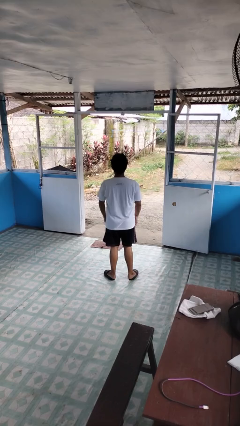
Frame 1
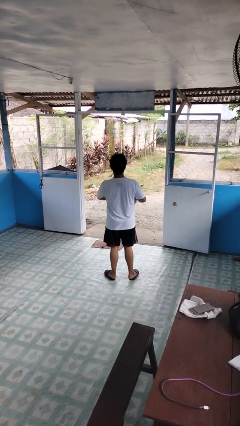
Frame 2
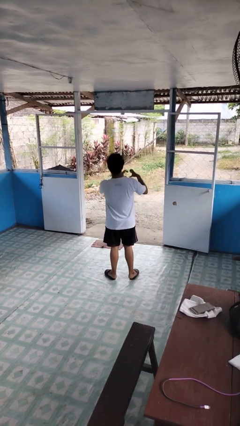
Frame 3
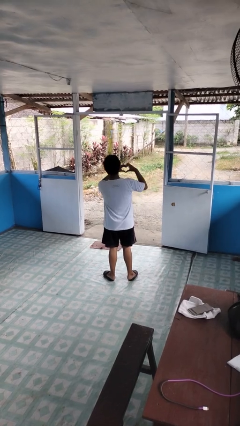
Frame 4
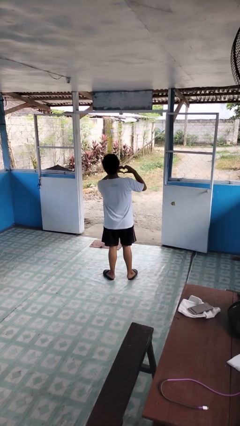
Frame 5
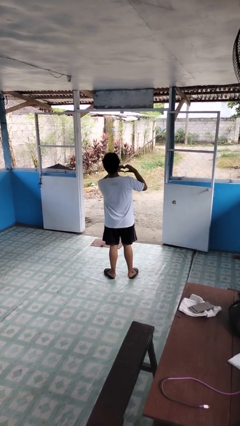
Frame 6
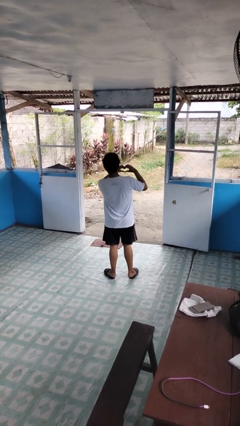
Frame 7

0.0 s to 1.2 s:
person gestures heart

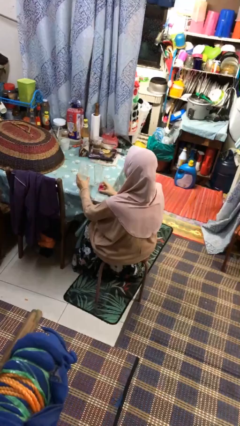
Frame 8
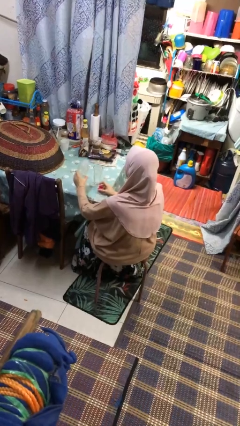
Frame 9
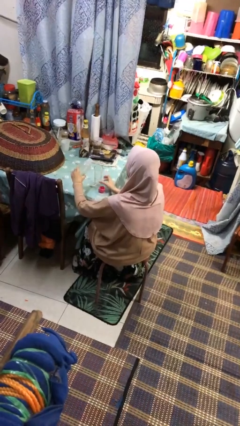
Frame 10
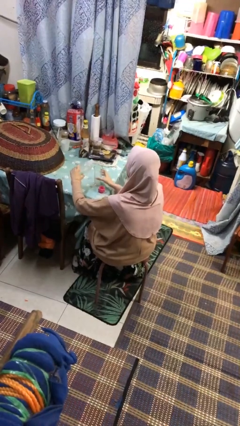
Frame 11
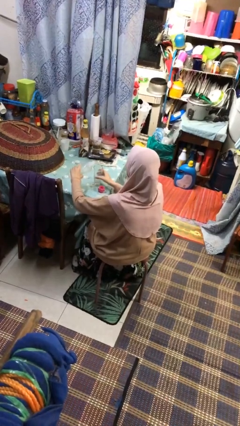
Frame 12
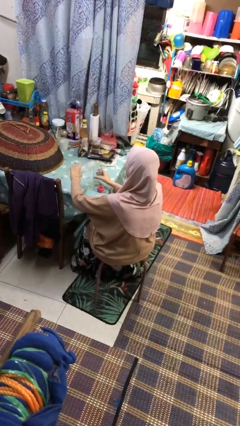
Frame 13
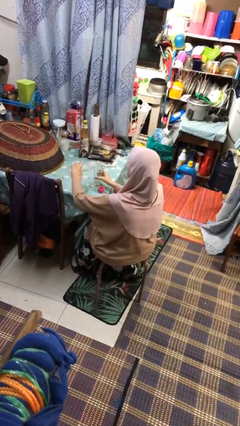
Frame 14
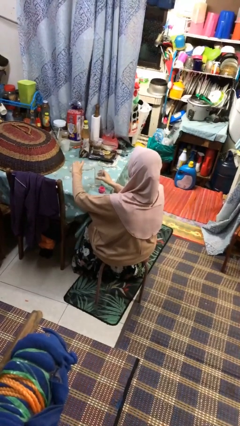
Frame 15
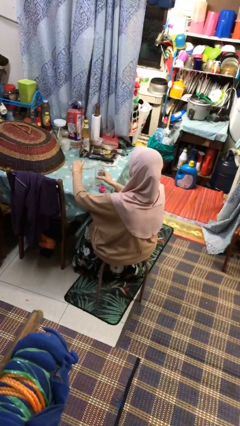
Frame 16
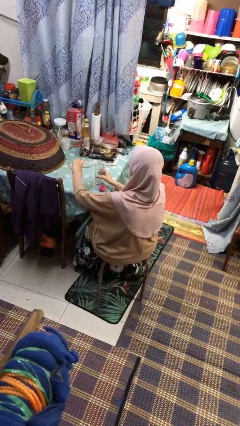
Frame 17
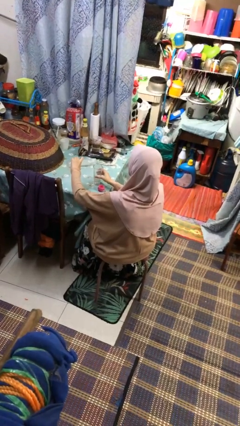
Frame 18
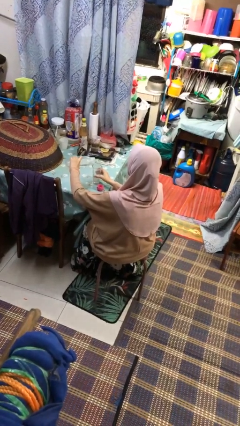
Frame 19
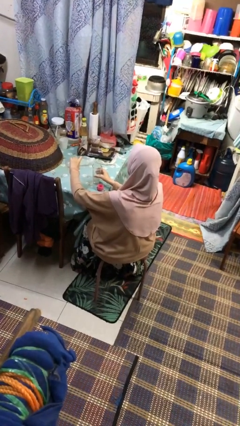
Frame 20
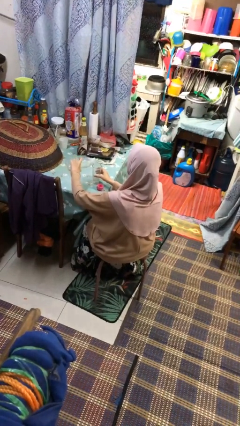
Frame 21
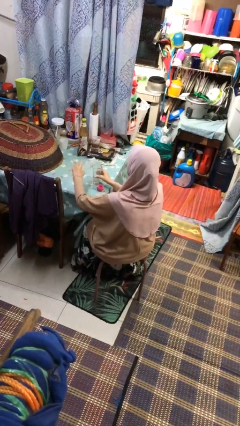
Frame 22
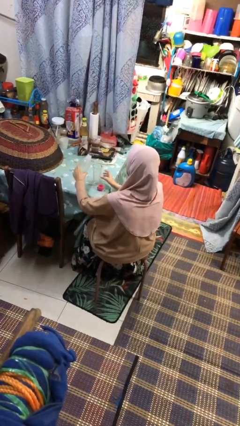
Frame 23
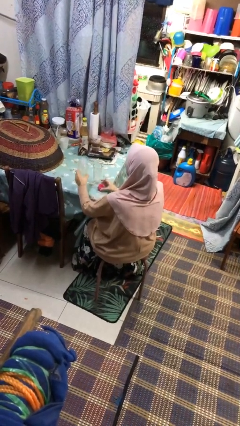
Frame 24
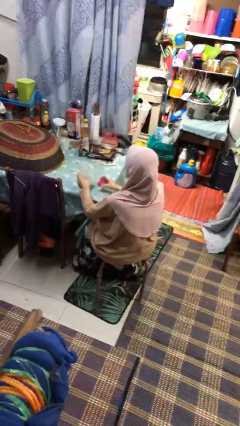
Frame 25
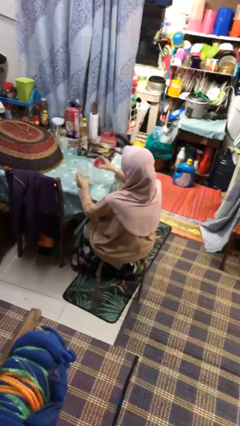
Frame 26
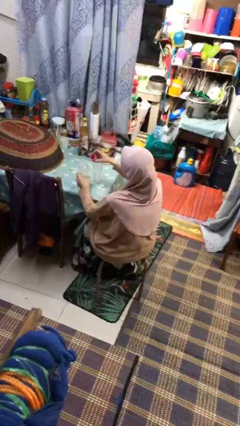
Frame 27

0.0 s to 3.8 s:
person pours liquid into cup

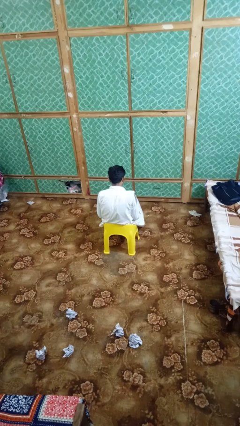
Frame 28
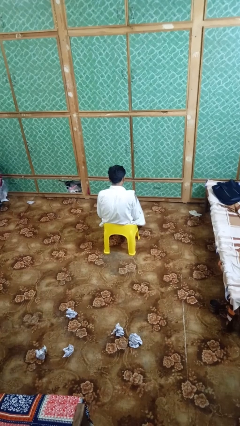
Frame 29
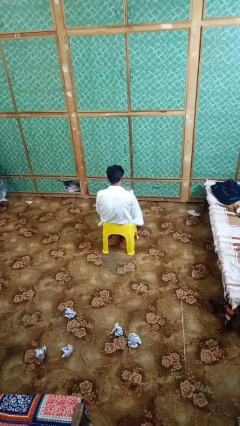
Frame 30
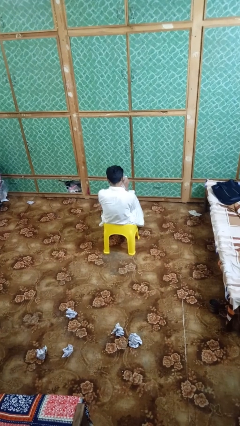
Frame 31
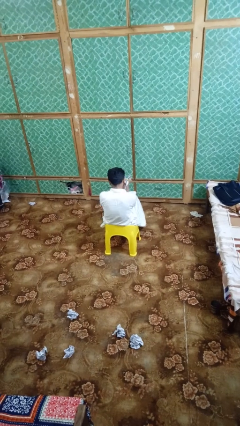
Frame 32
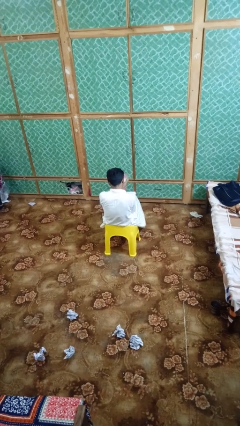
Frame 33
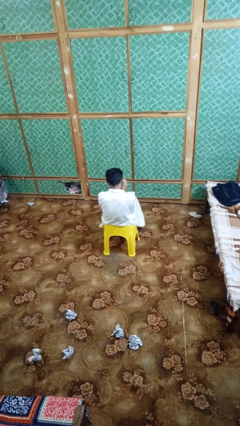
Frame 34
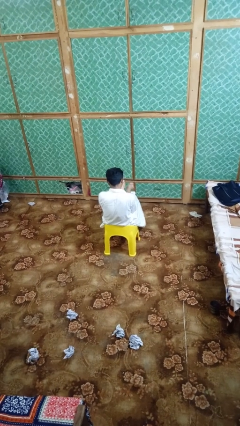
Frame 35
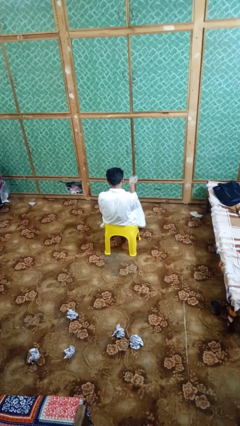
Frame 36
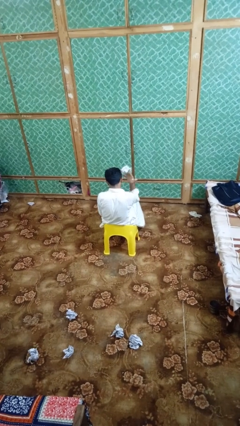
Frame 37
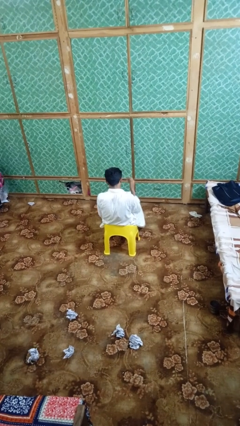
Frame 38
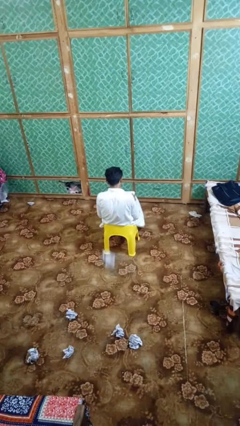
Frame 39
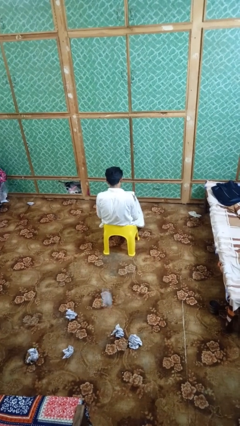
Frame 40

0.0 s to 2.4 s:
person crumples paper

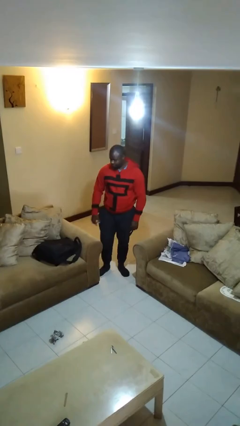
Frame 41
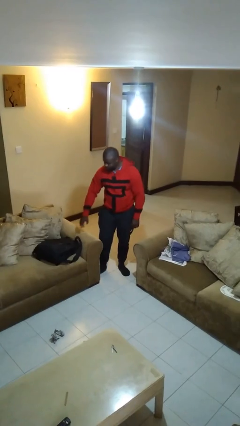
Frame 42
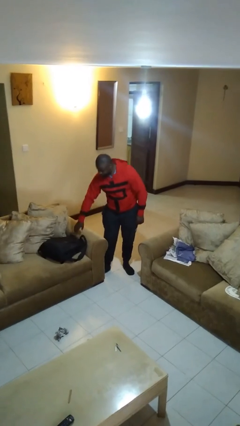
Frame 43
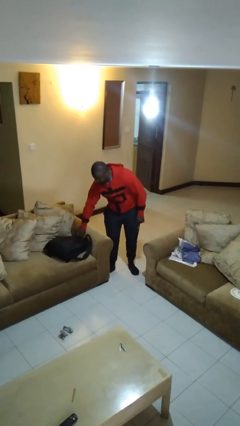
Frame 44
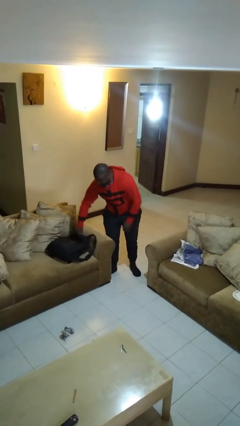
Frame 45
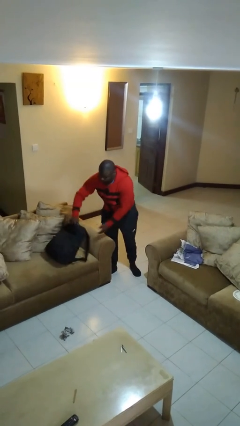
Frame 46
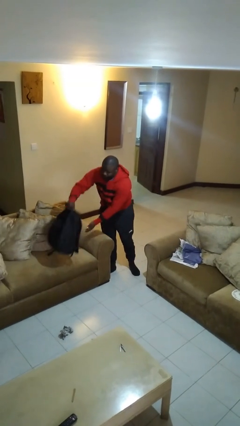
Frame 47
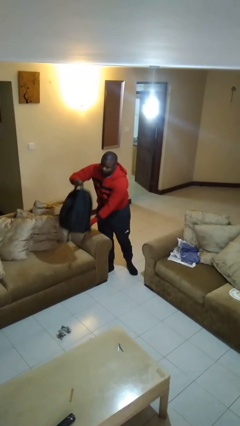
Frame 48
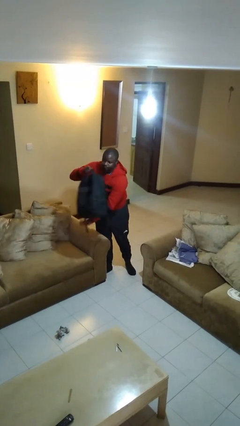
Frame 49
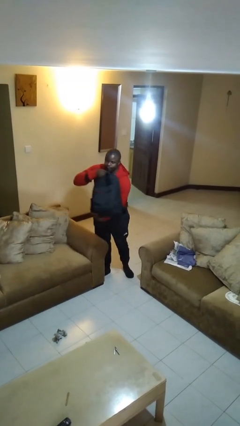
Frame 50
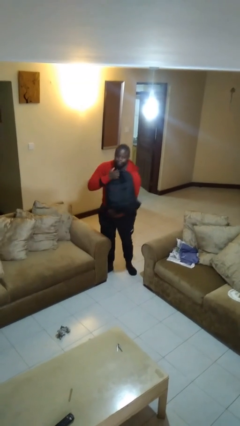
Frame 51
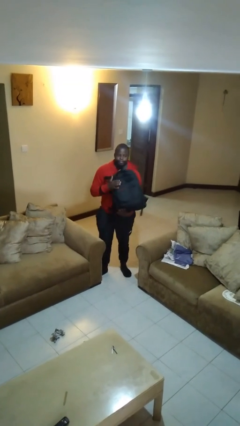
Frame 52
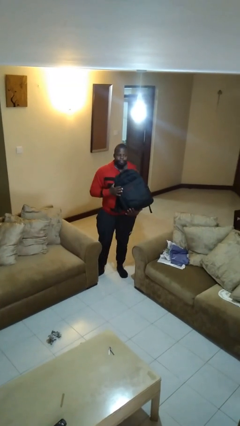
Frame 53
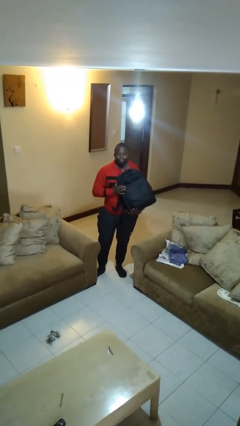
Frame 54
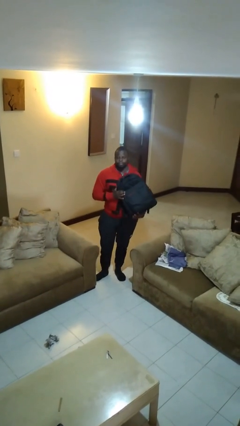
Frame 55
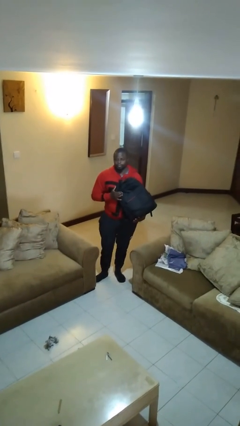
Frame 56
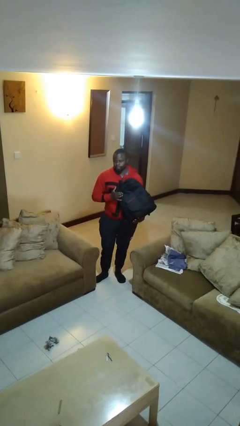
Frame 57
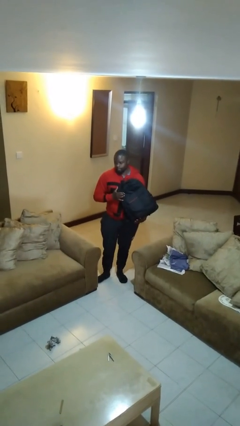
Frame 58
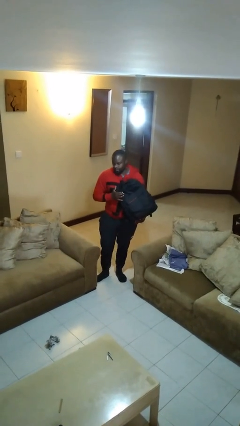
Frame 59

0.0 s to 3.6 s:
person picks up object from couch

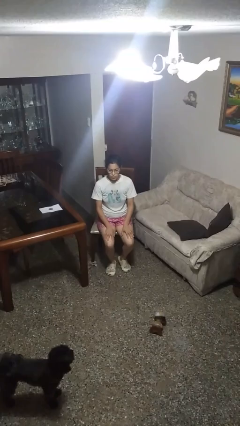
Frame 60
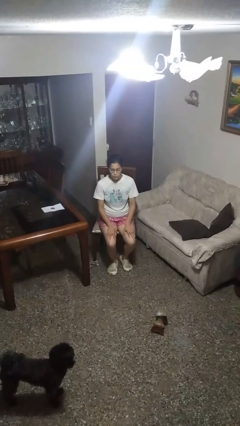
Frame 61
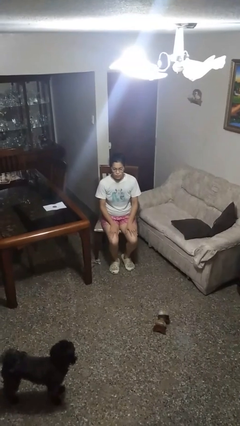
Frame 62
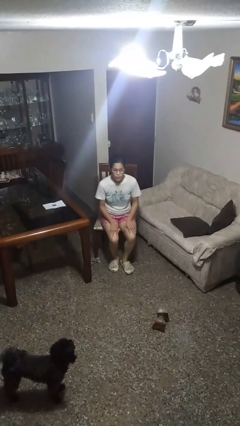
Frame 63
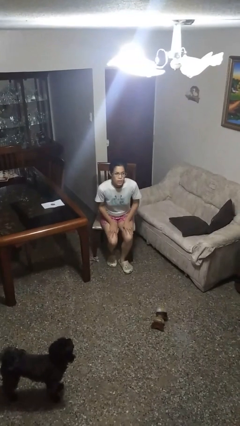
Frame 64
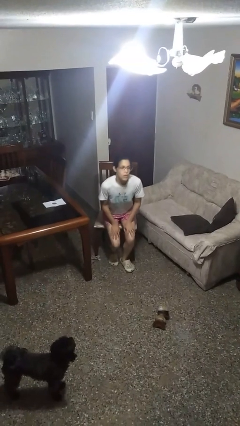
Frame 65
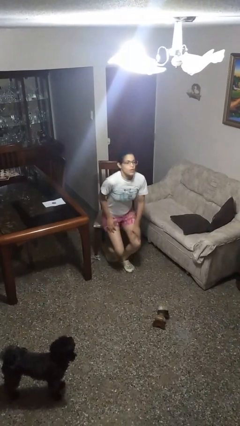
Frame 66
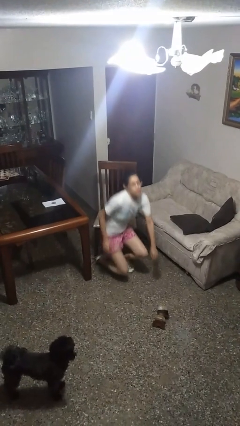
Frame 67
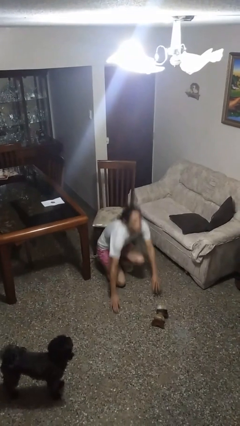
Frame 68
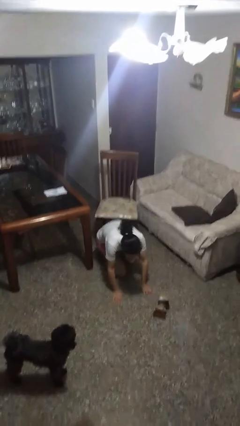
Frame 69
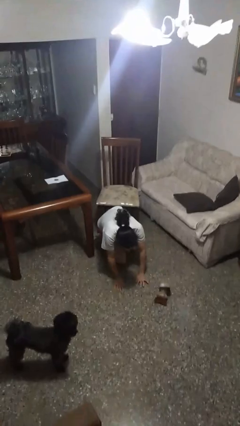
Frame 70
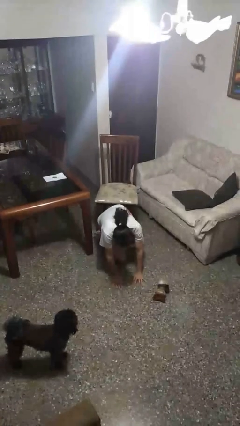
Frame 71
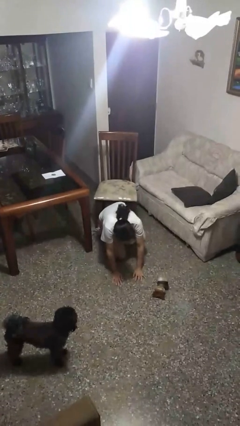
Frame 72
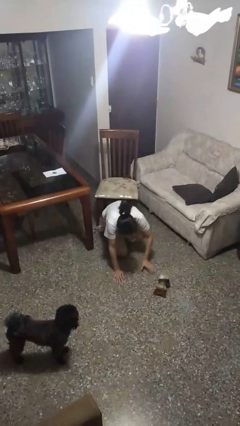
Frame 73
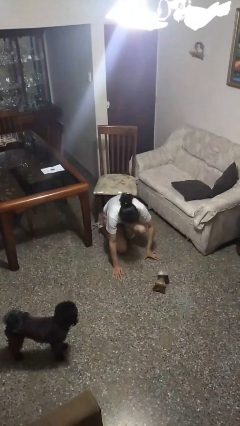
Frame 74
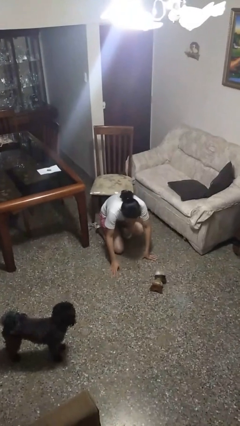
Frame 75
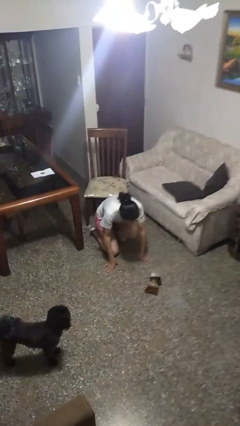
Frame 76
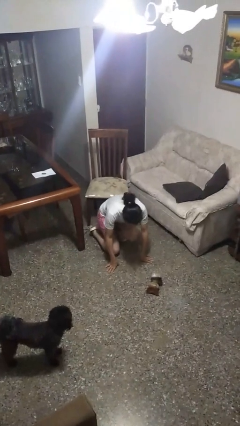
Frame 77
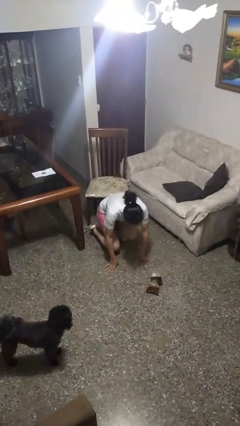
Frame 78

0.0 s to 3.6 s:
person falls from chair

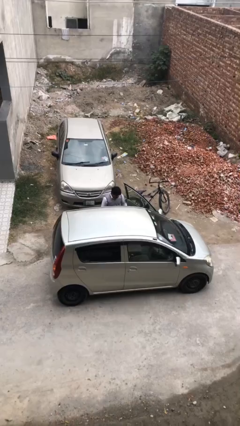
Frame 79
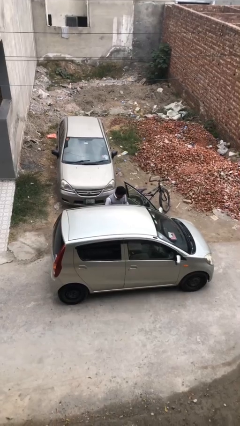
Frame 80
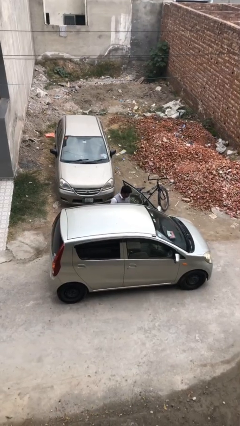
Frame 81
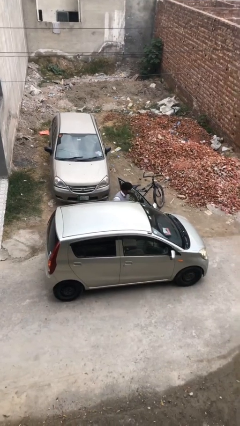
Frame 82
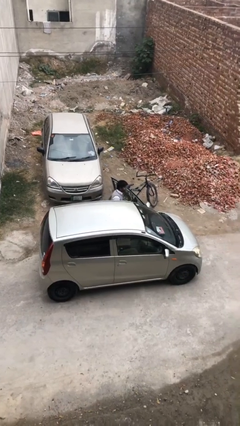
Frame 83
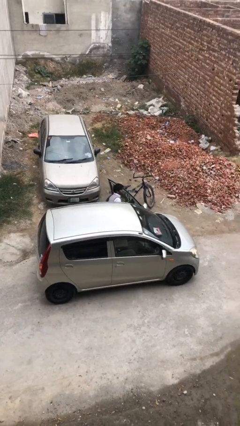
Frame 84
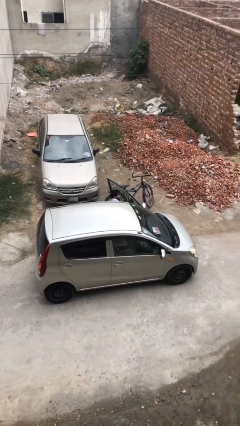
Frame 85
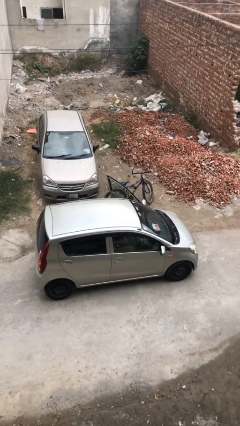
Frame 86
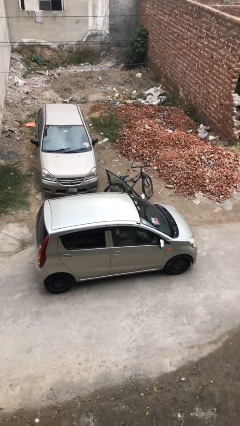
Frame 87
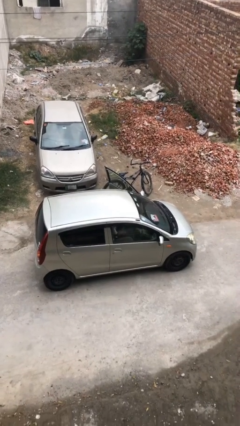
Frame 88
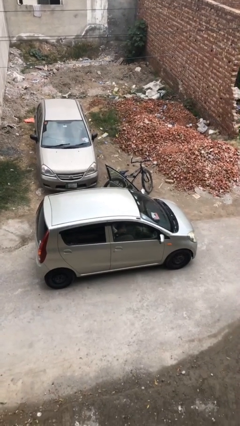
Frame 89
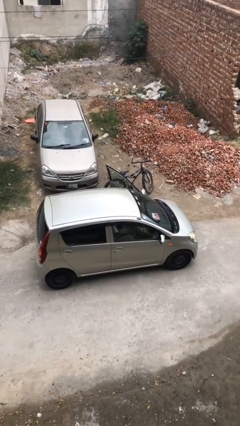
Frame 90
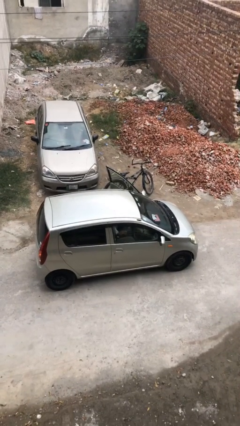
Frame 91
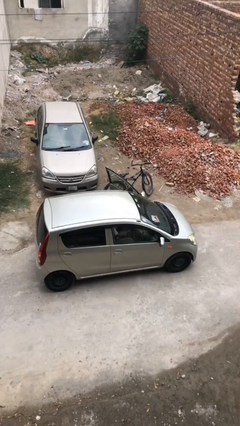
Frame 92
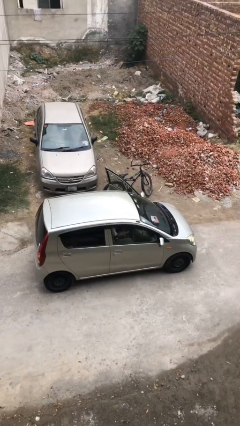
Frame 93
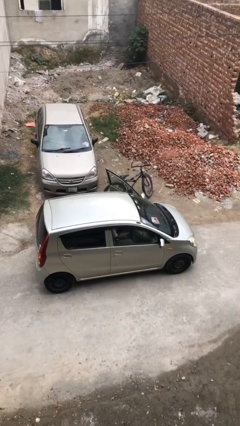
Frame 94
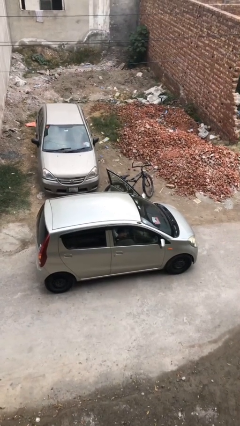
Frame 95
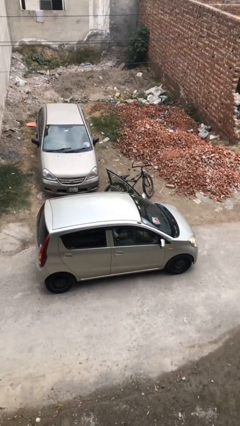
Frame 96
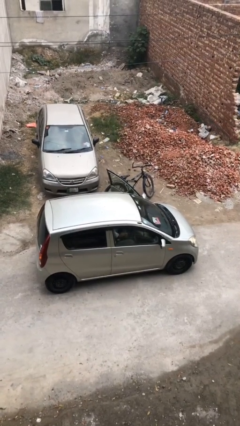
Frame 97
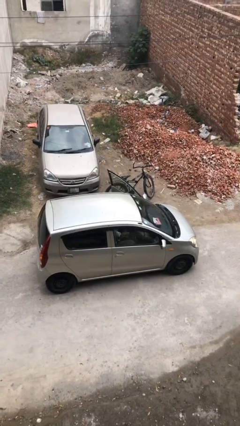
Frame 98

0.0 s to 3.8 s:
person enters car
